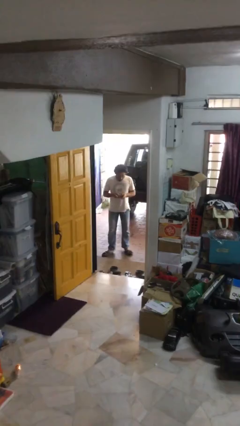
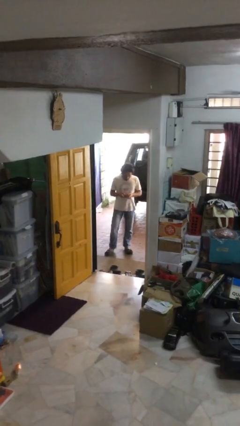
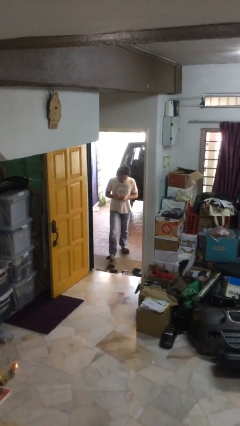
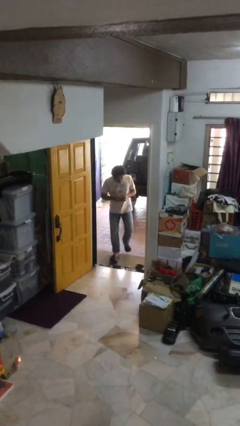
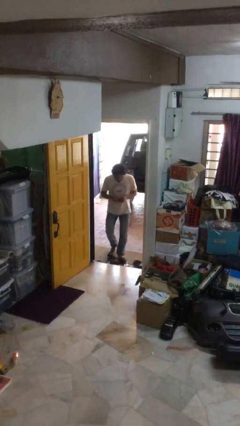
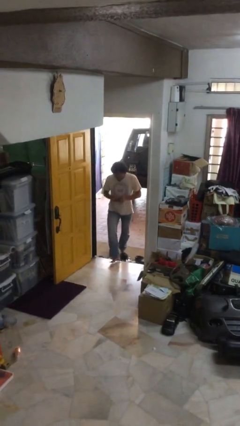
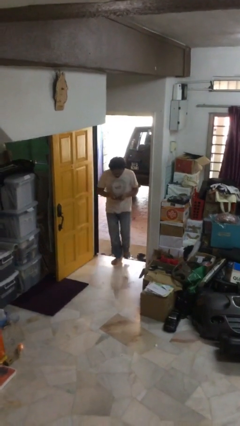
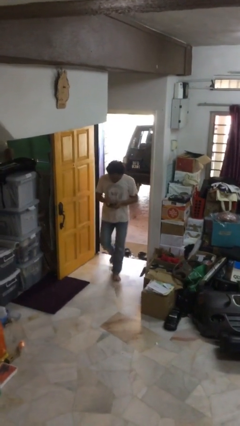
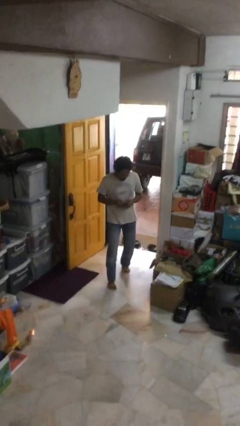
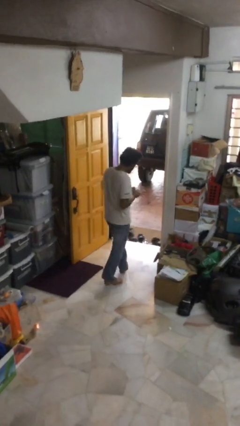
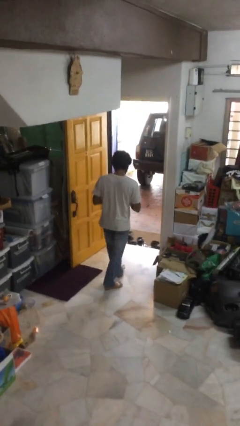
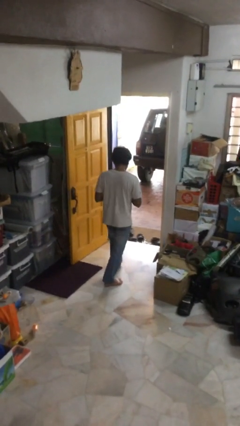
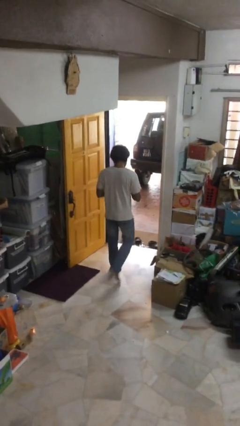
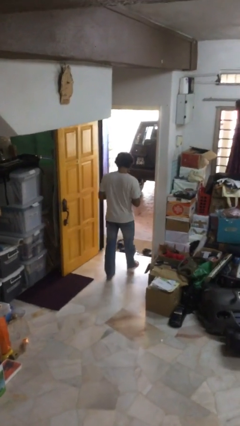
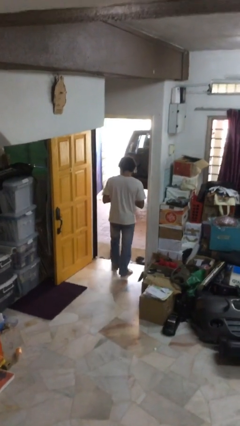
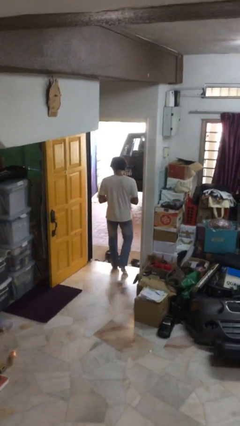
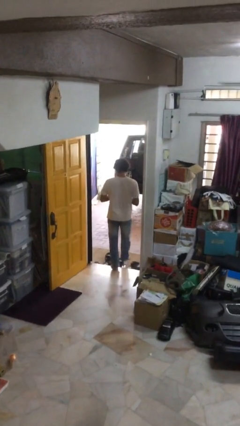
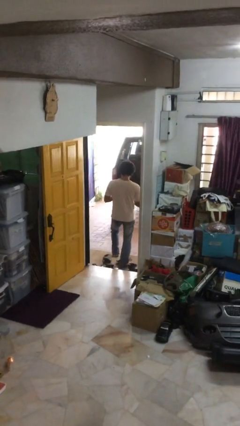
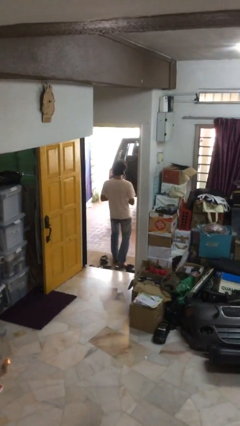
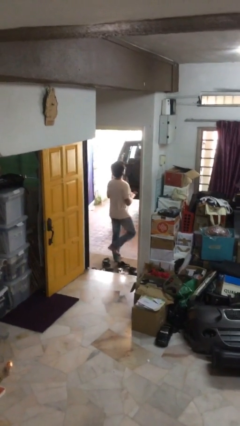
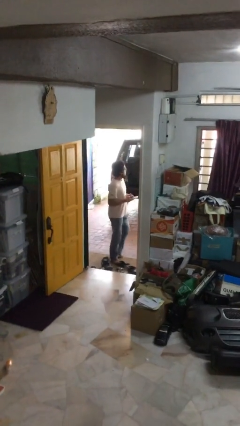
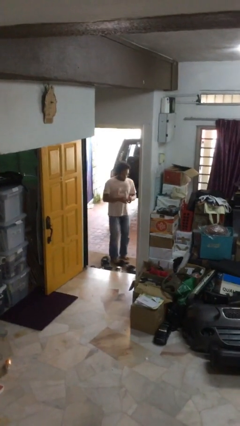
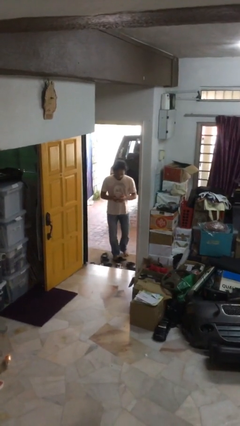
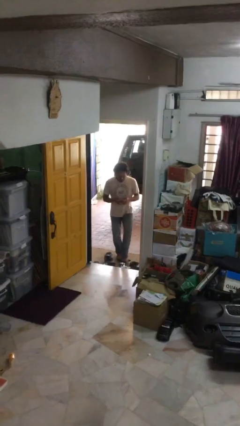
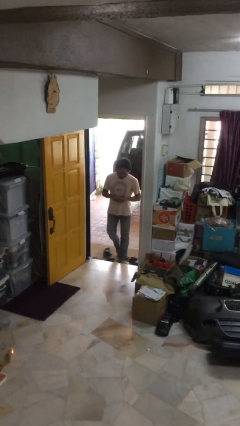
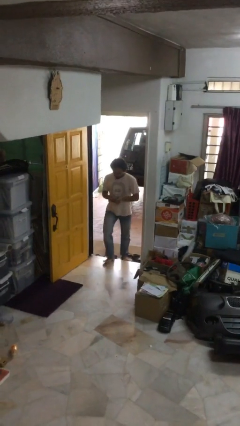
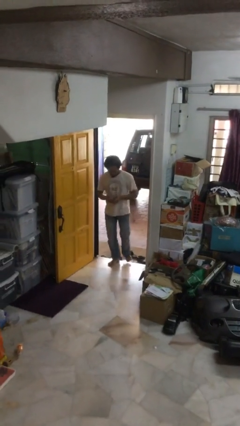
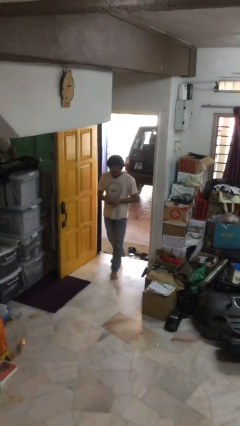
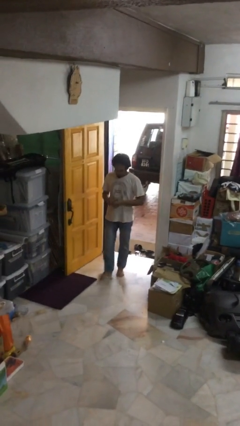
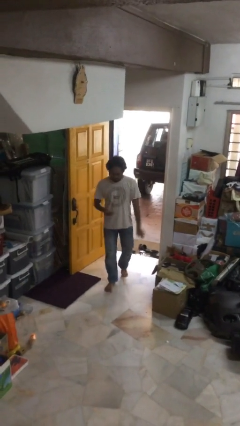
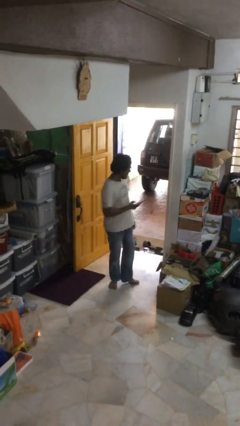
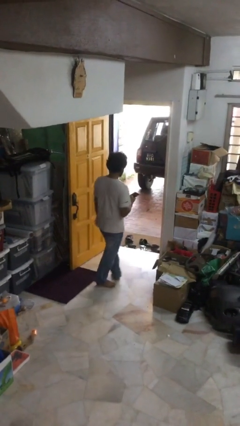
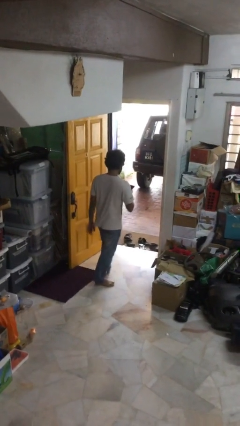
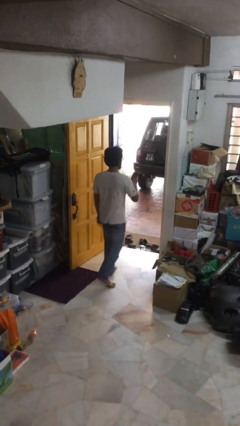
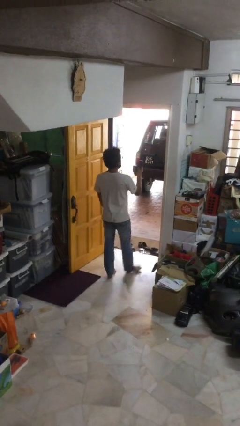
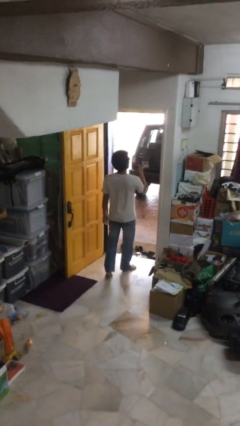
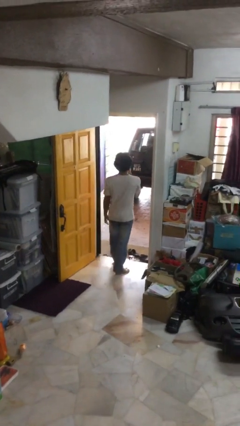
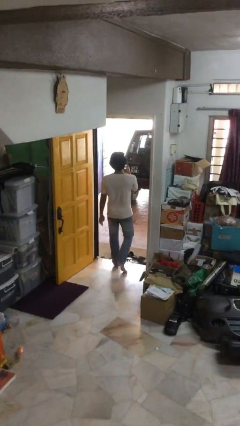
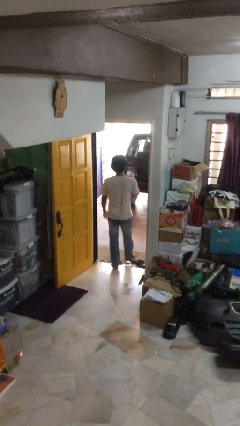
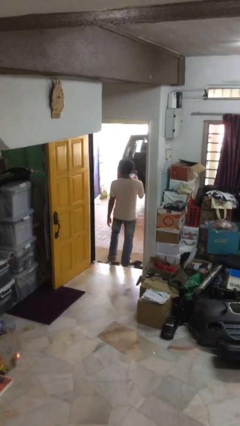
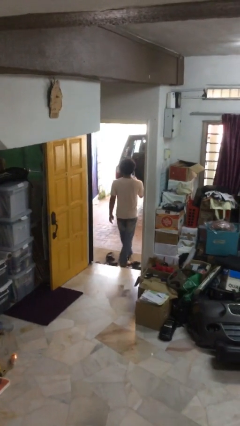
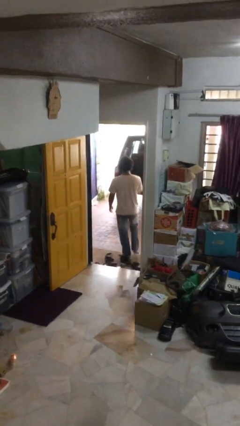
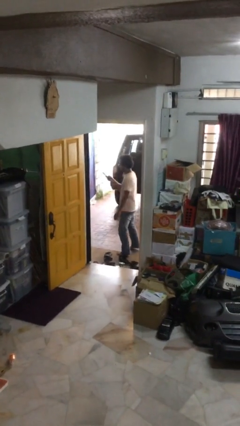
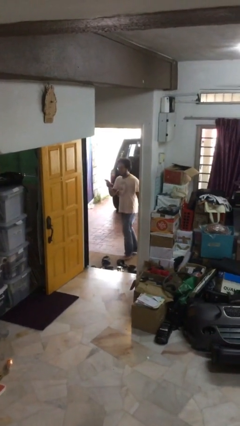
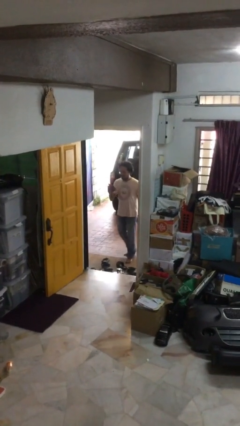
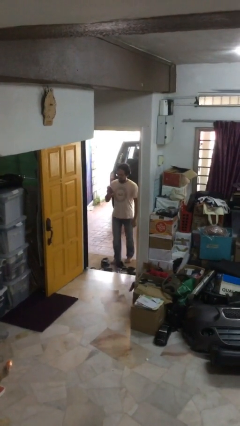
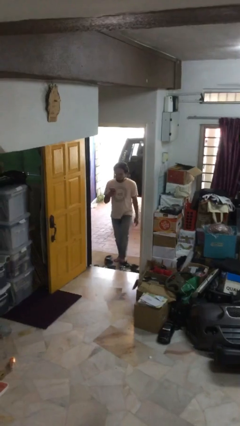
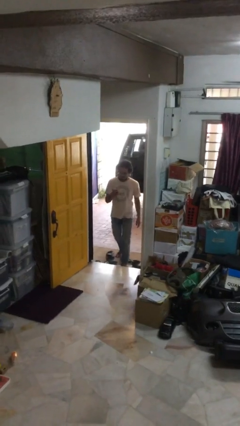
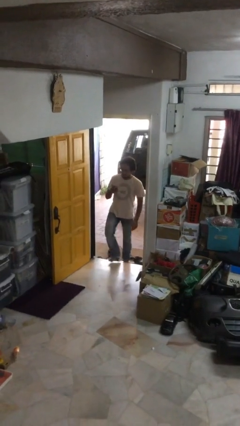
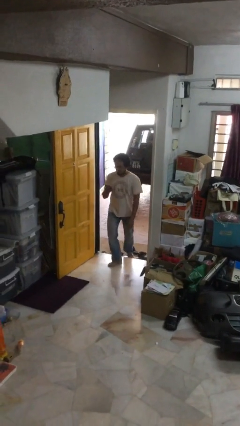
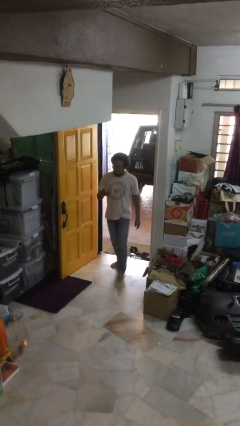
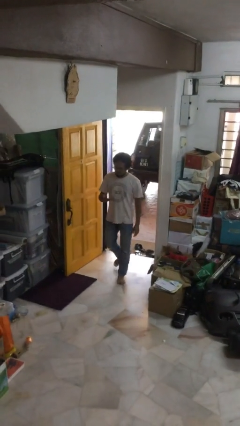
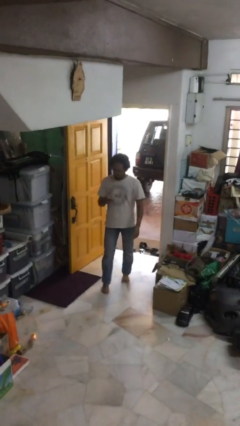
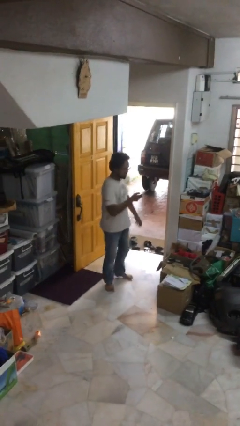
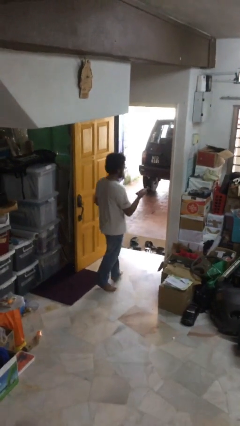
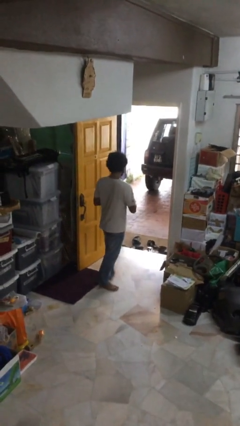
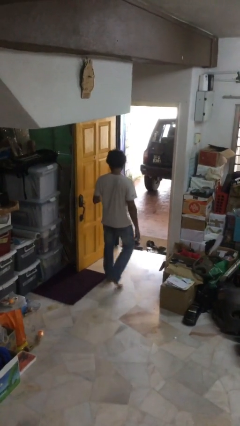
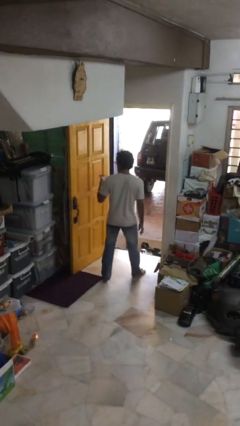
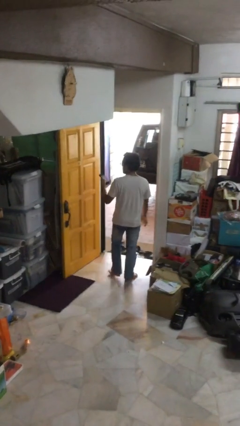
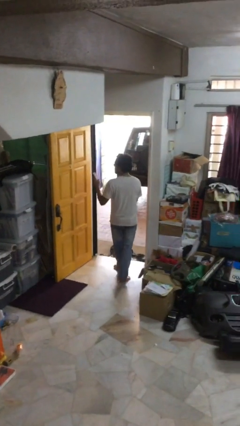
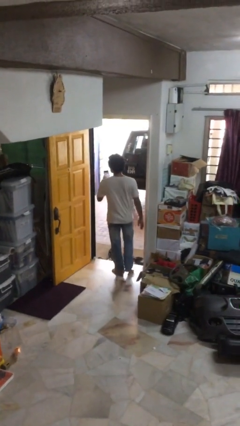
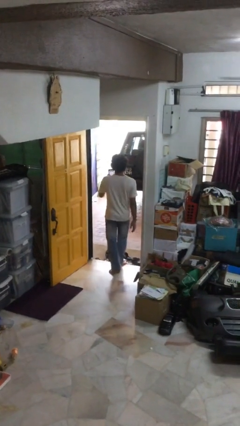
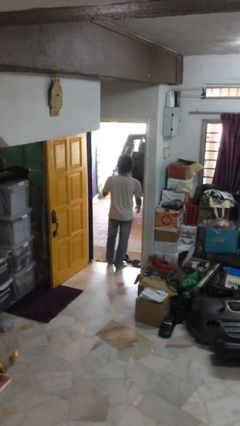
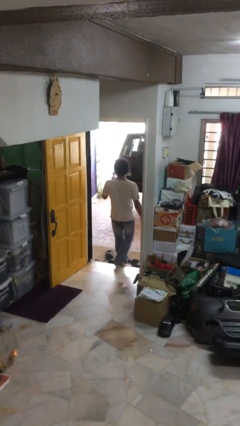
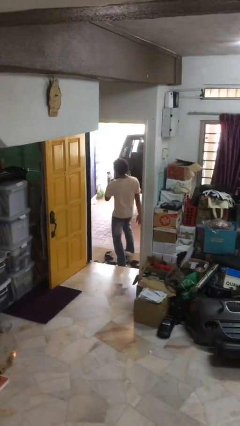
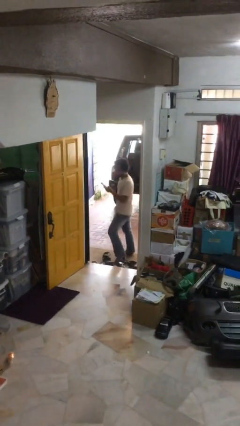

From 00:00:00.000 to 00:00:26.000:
person texts on phone

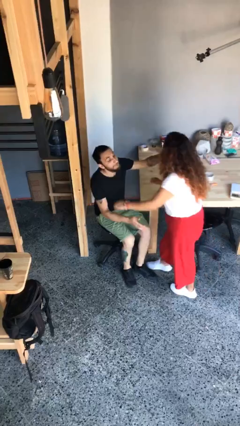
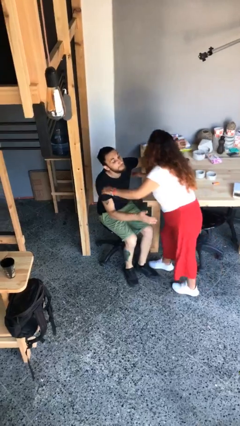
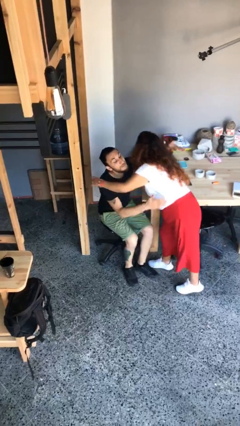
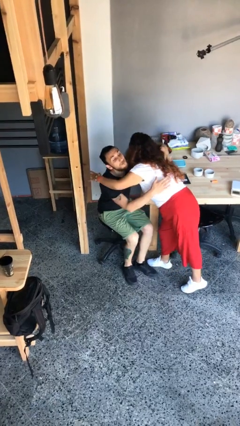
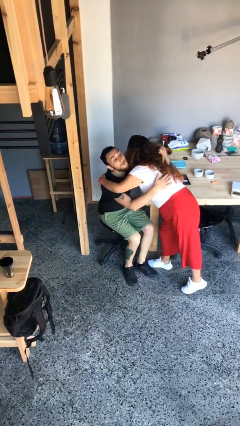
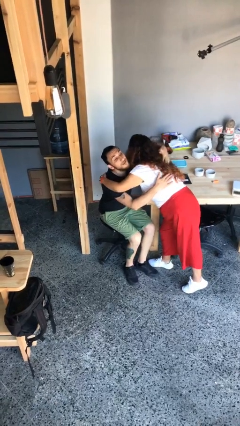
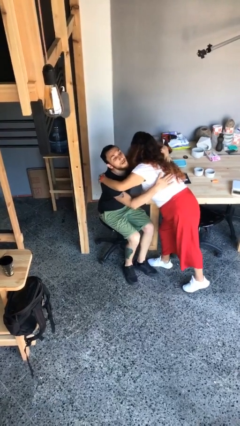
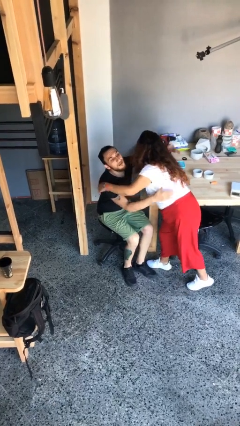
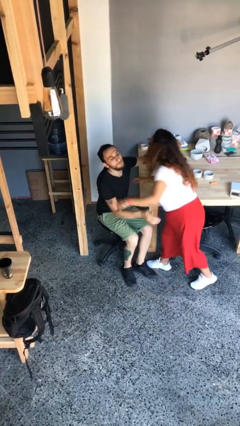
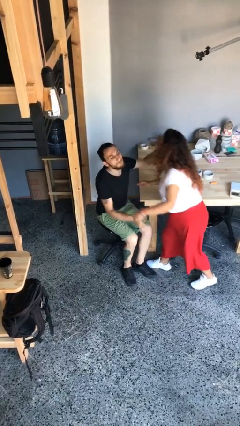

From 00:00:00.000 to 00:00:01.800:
person embraces person

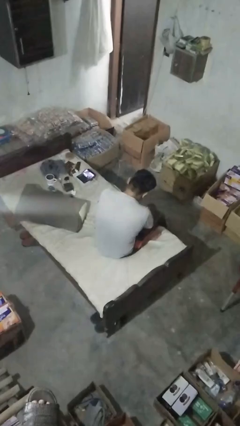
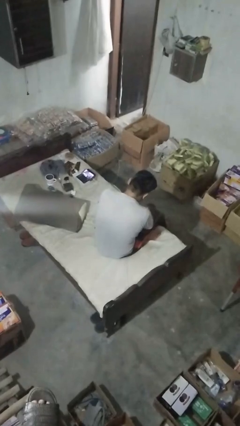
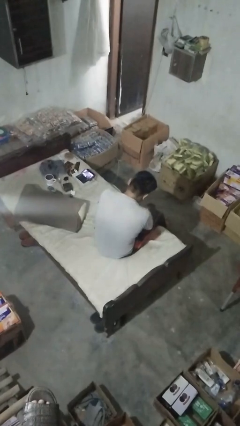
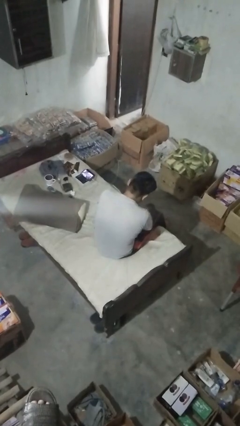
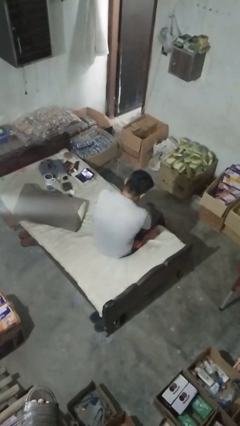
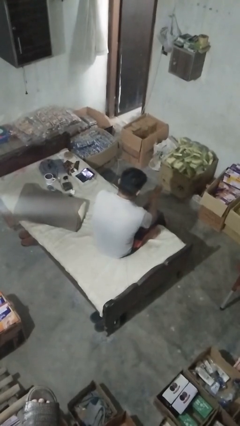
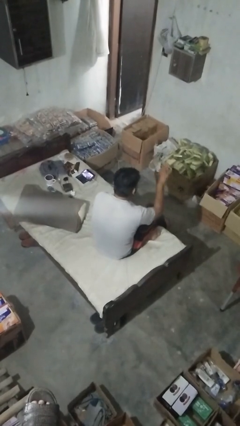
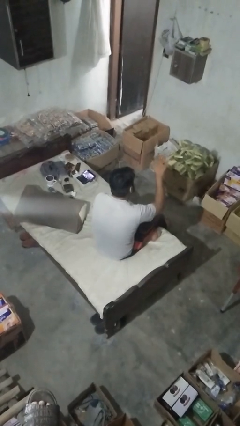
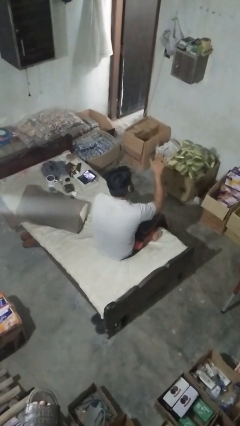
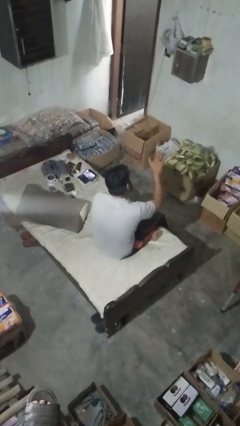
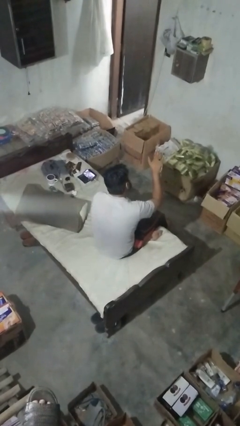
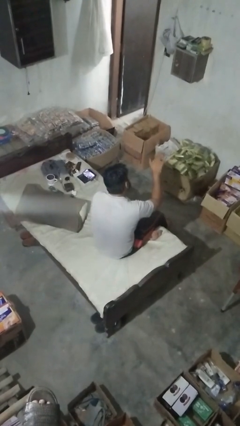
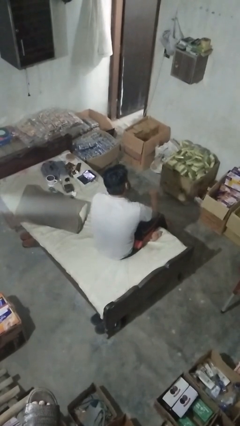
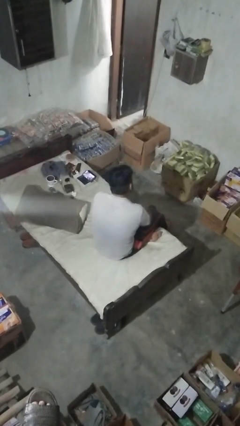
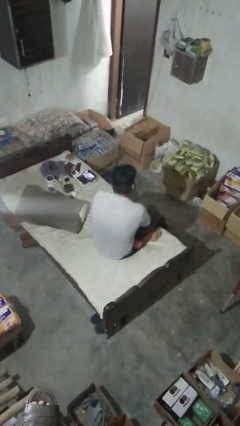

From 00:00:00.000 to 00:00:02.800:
person gestures stop

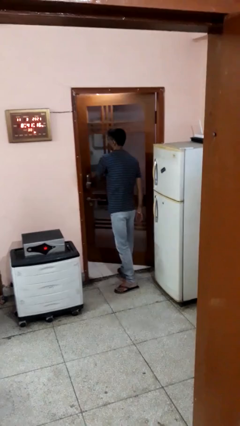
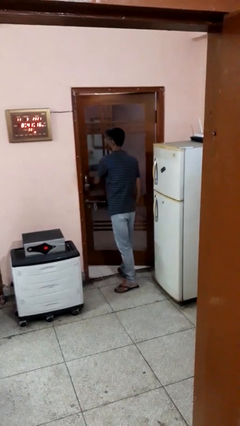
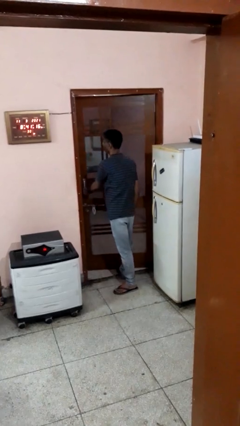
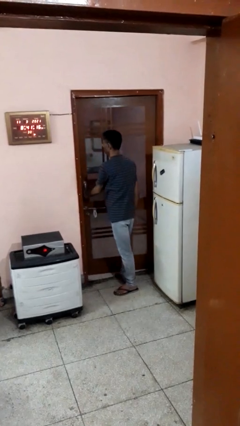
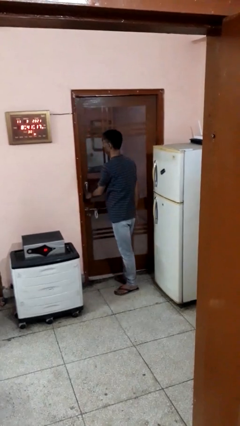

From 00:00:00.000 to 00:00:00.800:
person closes facility door
